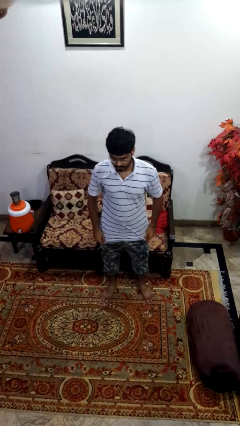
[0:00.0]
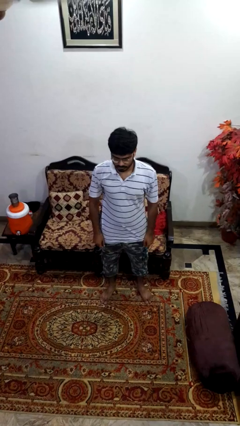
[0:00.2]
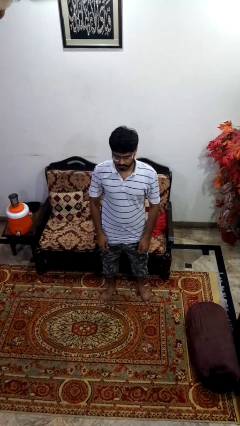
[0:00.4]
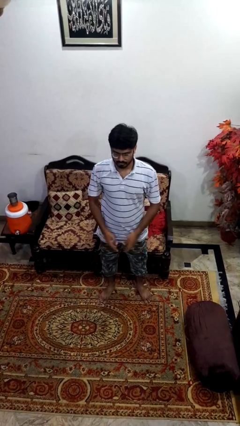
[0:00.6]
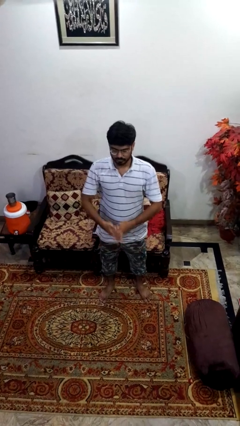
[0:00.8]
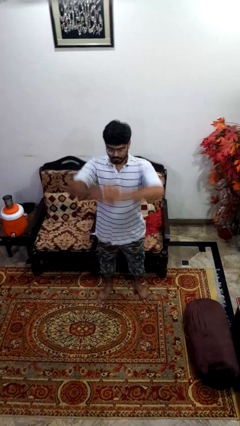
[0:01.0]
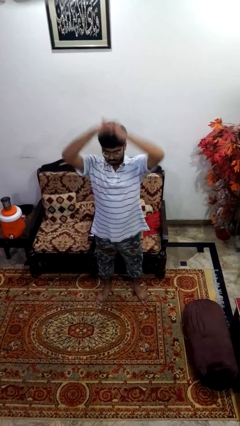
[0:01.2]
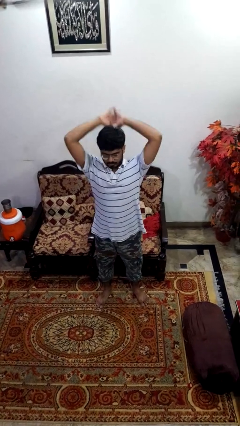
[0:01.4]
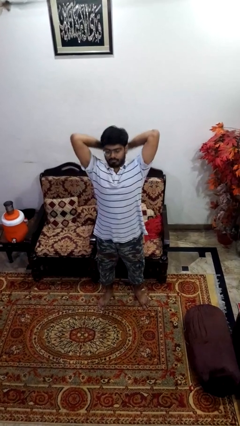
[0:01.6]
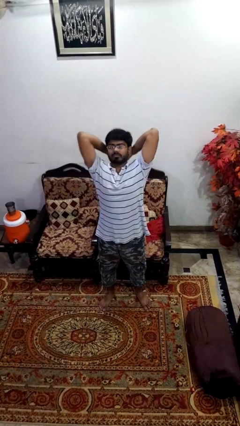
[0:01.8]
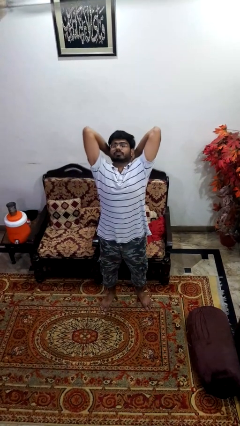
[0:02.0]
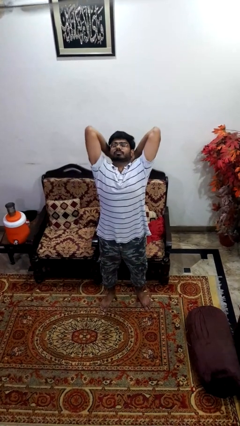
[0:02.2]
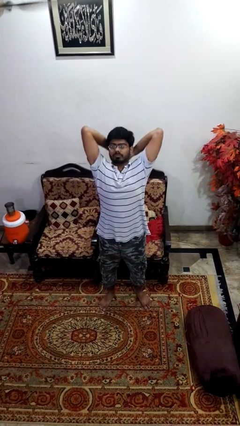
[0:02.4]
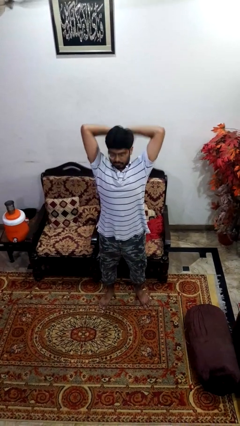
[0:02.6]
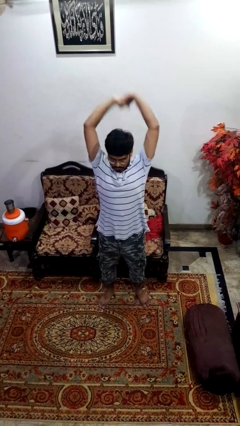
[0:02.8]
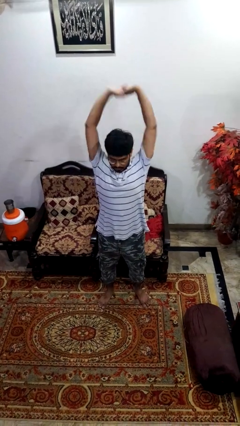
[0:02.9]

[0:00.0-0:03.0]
person stretches arms over head

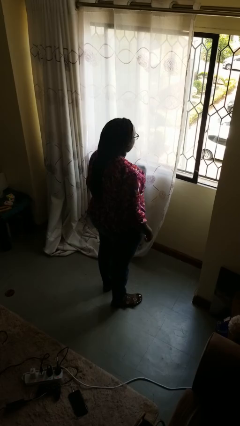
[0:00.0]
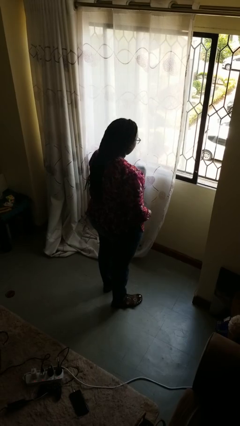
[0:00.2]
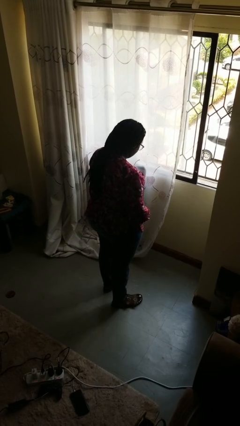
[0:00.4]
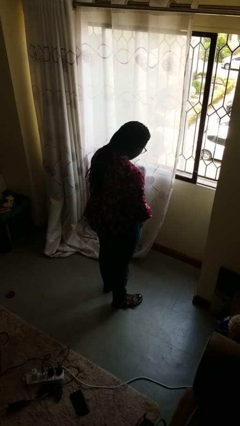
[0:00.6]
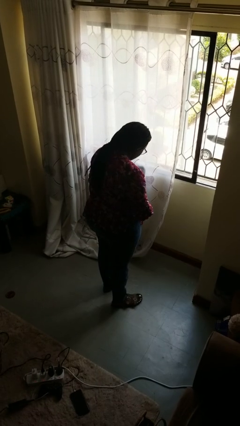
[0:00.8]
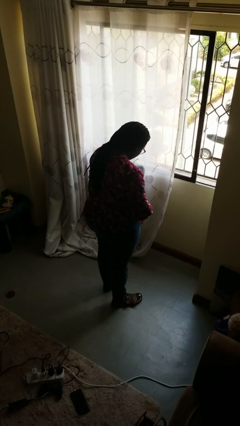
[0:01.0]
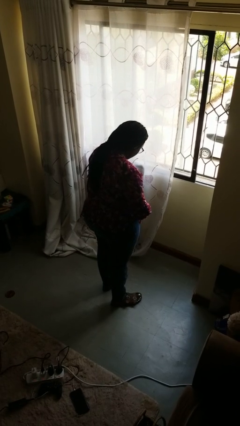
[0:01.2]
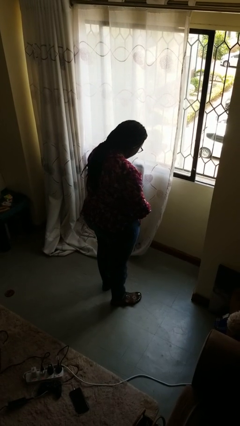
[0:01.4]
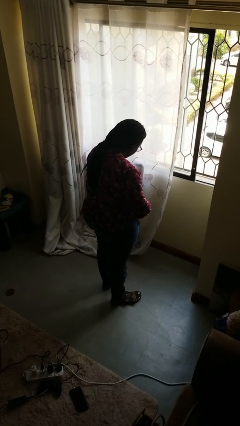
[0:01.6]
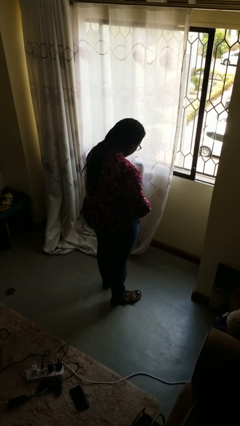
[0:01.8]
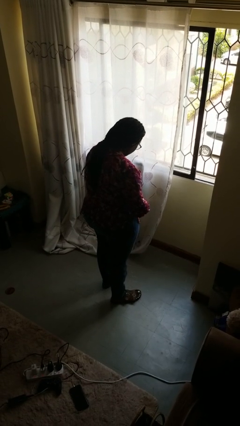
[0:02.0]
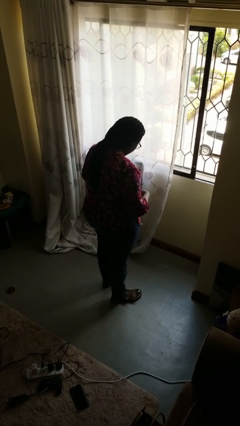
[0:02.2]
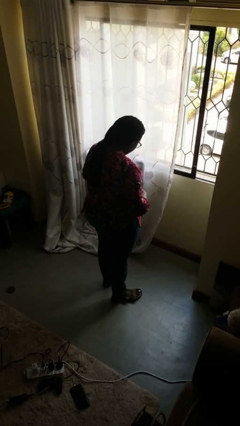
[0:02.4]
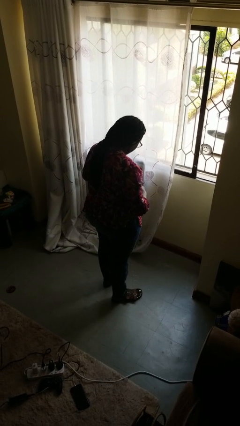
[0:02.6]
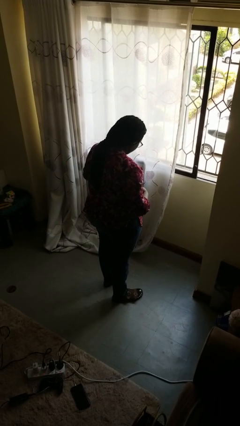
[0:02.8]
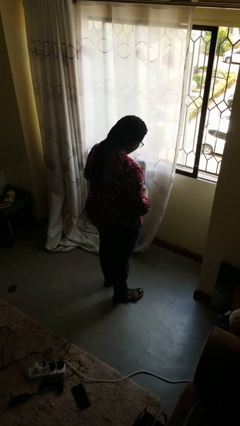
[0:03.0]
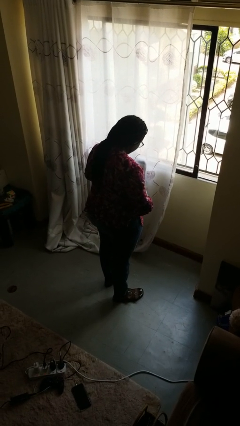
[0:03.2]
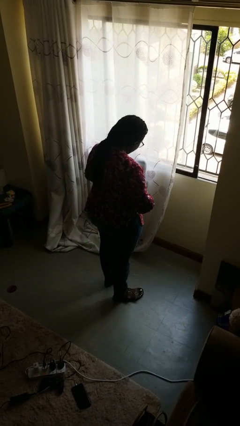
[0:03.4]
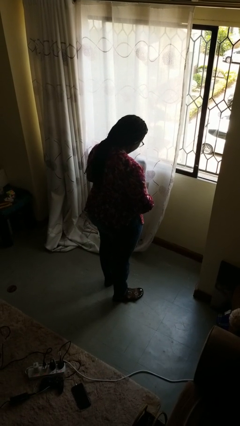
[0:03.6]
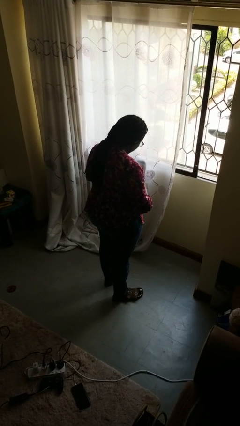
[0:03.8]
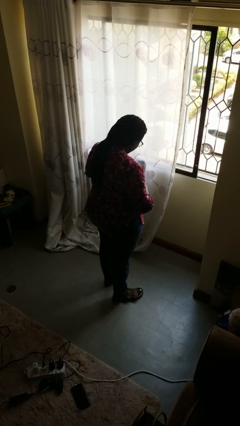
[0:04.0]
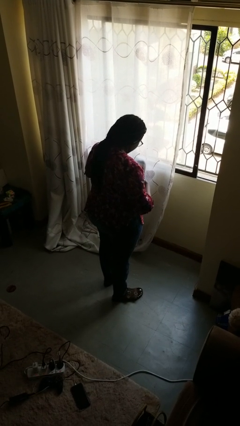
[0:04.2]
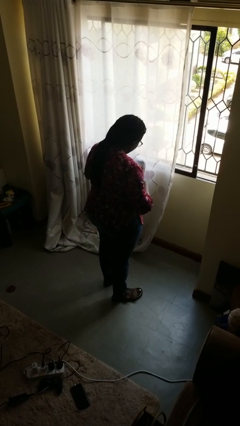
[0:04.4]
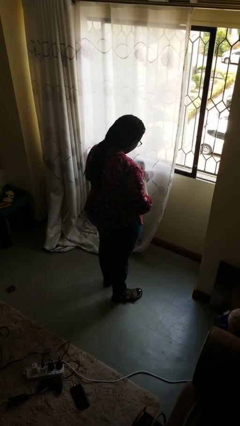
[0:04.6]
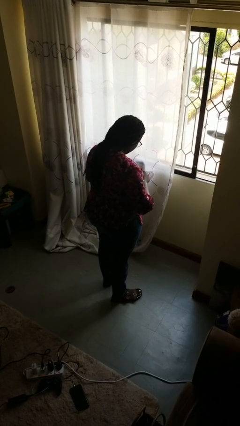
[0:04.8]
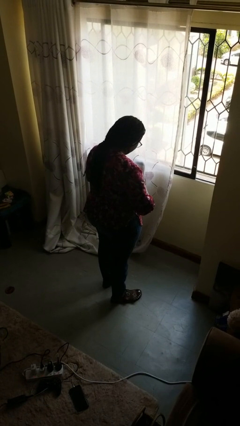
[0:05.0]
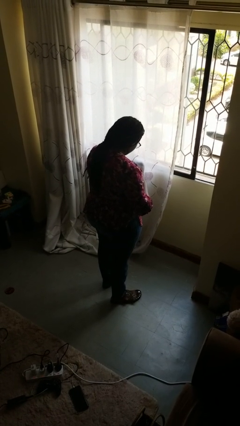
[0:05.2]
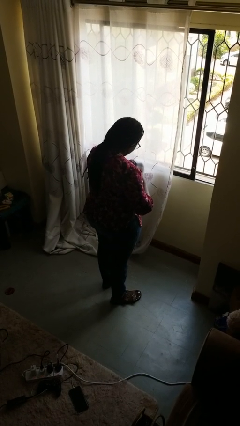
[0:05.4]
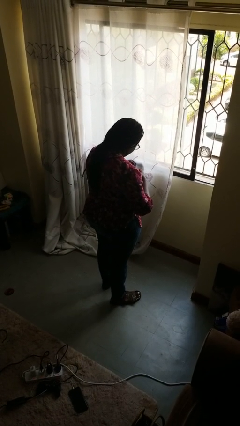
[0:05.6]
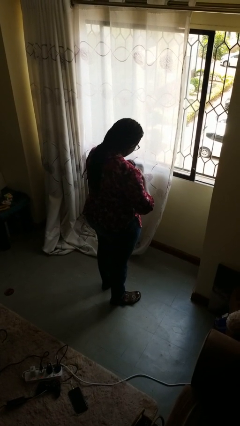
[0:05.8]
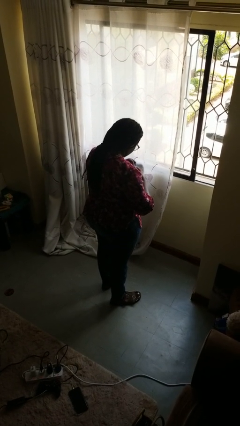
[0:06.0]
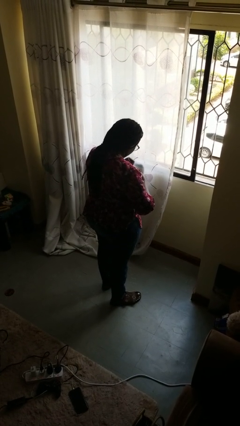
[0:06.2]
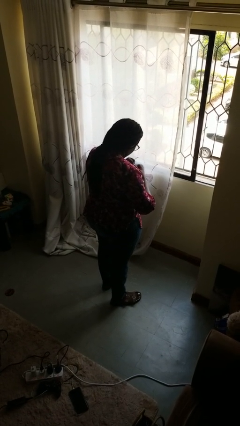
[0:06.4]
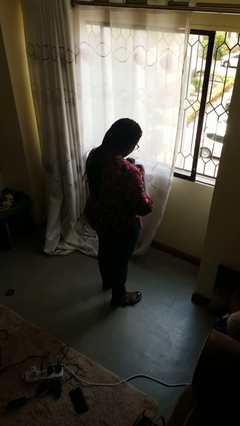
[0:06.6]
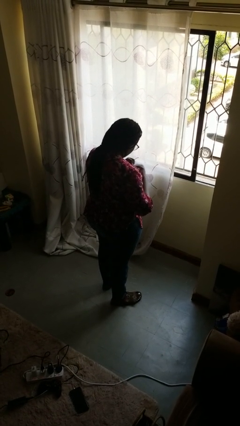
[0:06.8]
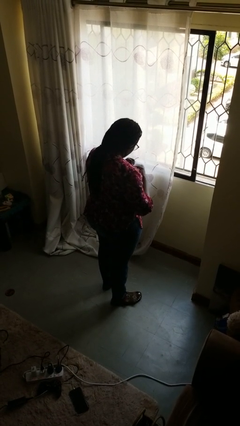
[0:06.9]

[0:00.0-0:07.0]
person buttons shirt

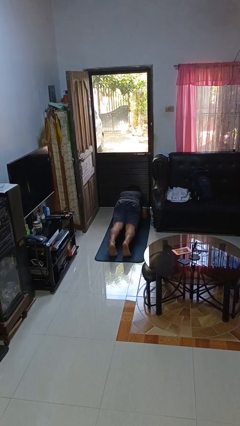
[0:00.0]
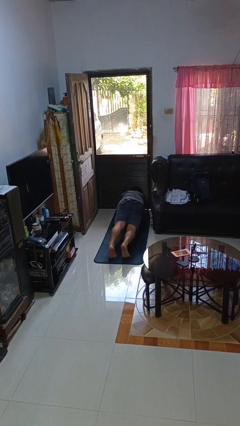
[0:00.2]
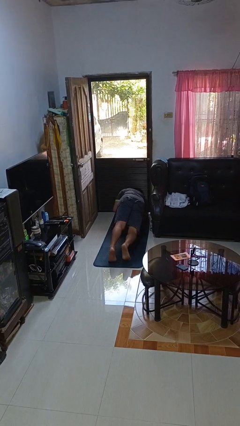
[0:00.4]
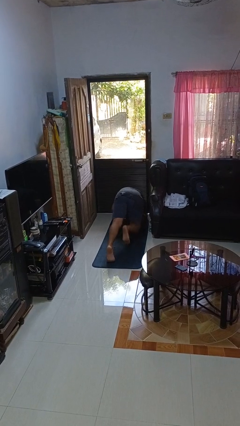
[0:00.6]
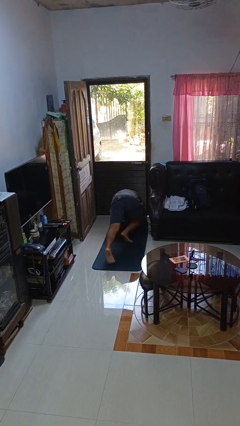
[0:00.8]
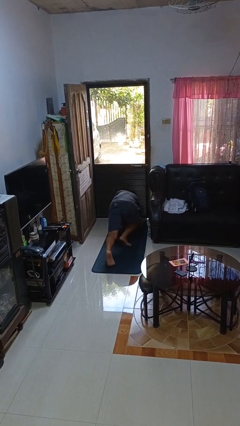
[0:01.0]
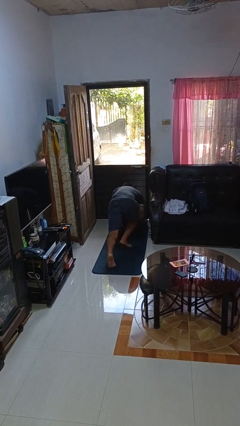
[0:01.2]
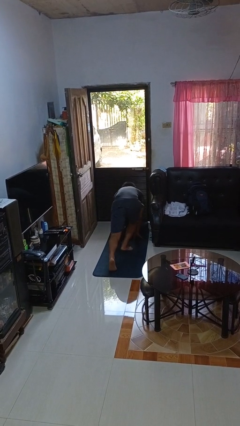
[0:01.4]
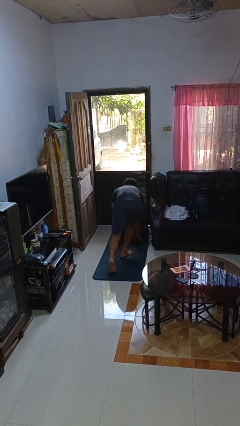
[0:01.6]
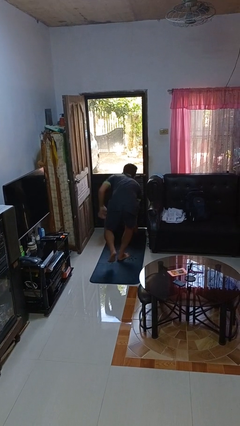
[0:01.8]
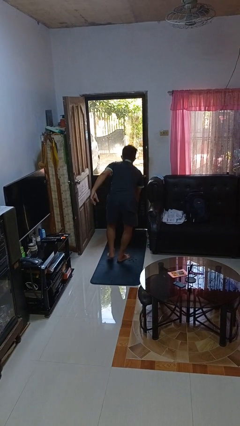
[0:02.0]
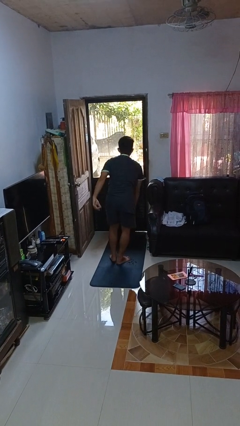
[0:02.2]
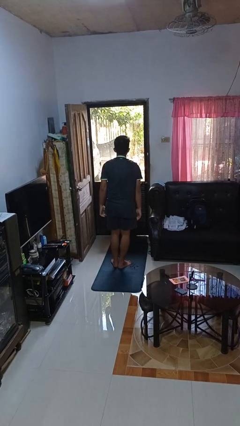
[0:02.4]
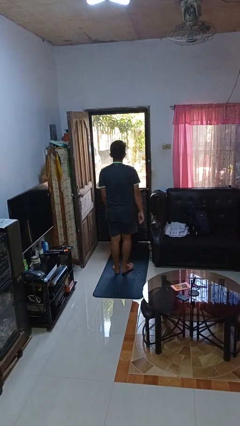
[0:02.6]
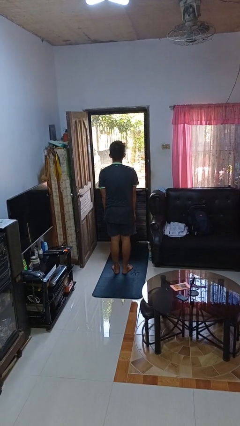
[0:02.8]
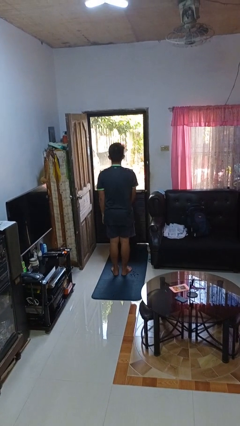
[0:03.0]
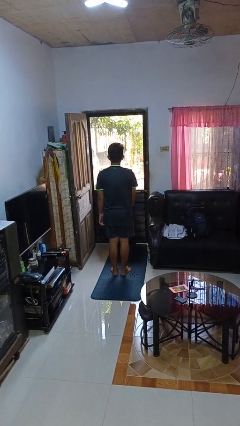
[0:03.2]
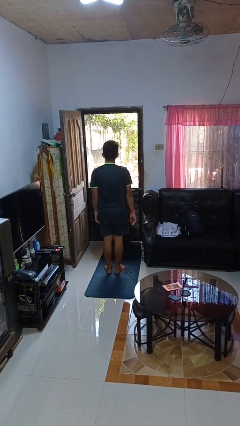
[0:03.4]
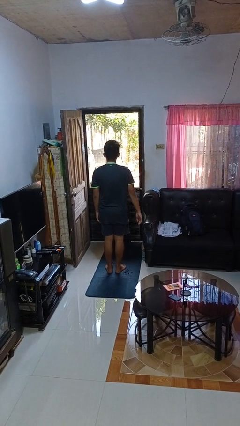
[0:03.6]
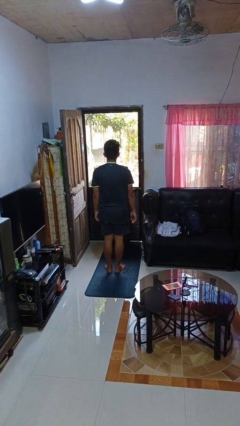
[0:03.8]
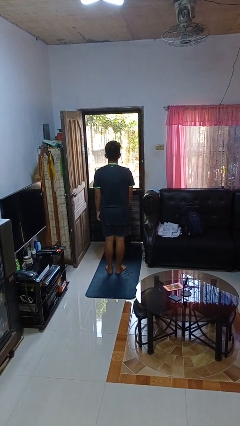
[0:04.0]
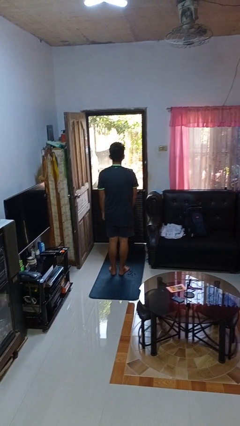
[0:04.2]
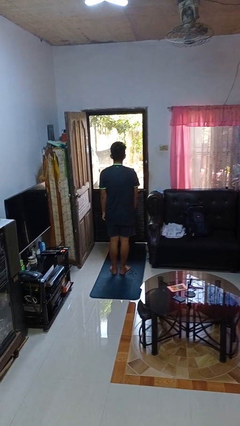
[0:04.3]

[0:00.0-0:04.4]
person stands up from floor

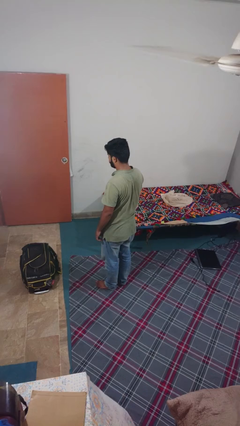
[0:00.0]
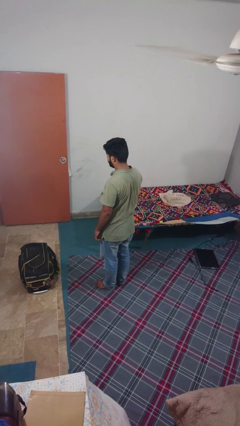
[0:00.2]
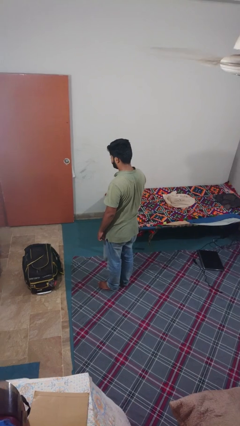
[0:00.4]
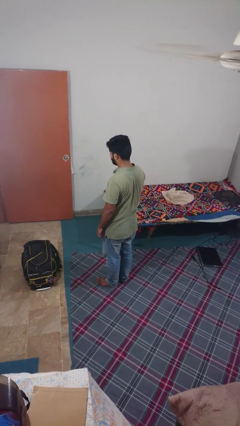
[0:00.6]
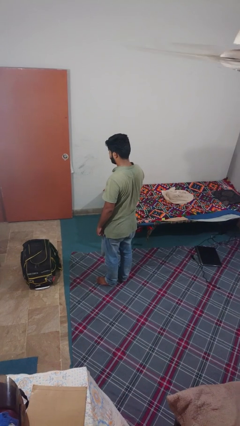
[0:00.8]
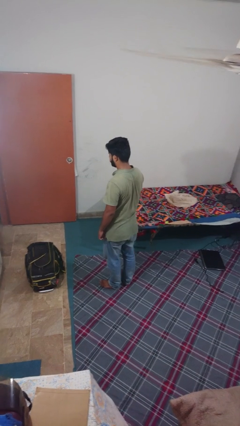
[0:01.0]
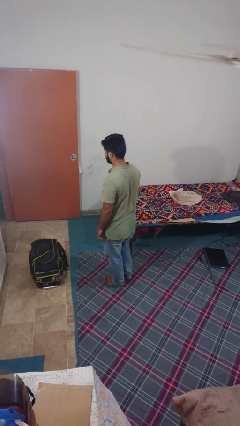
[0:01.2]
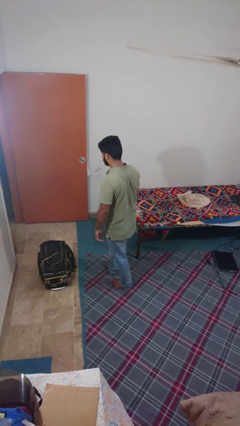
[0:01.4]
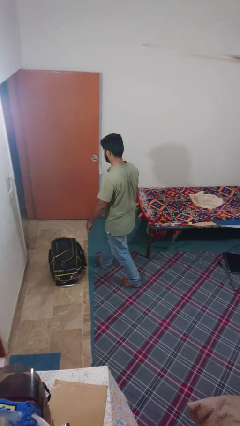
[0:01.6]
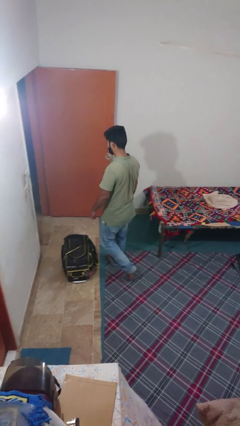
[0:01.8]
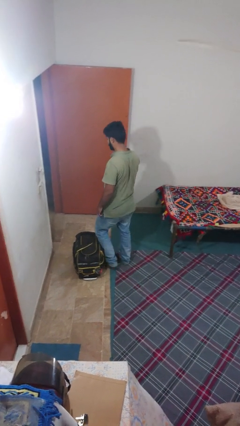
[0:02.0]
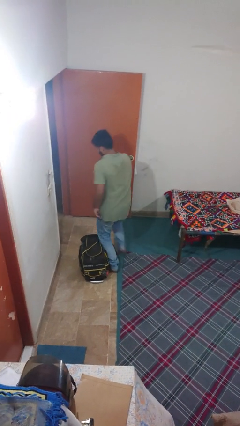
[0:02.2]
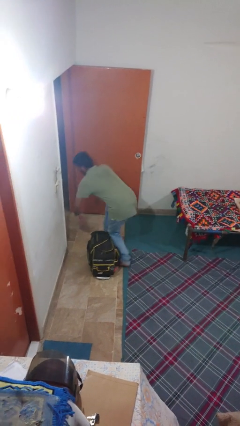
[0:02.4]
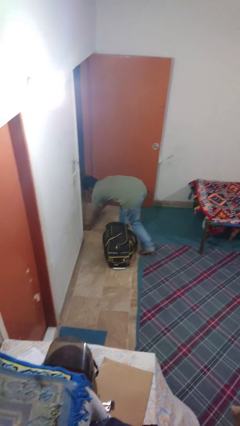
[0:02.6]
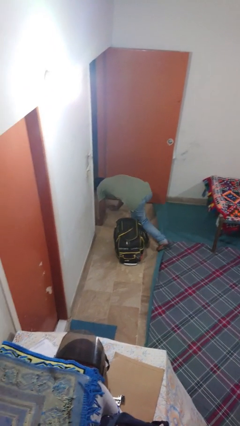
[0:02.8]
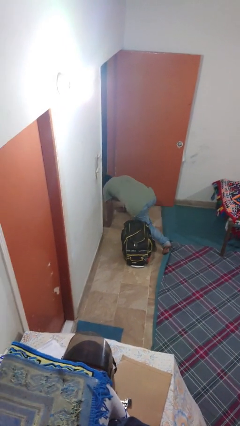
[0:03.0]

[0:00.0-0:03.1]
person trips on object on floor
